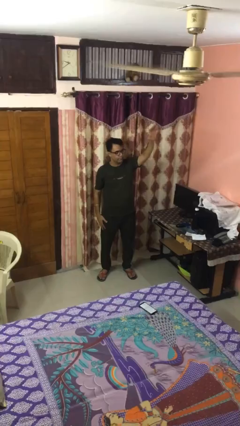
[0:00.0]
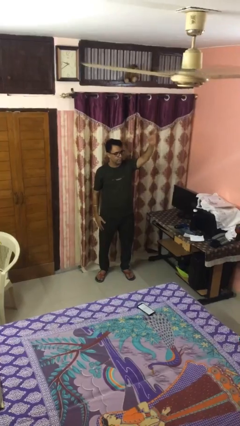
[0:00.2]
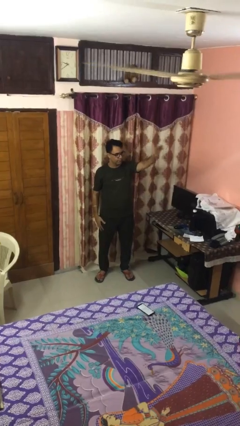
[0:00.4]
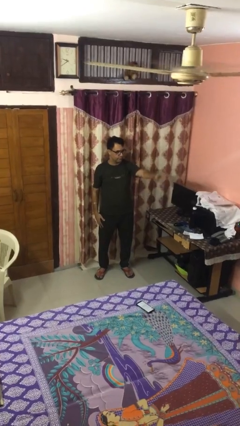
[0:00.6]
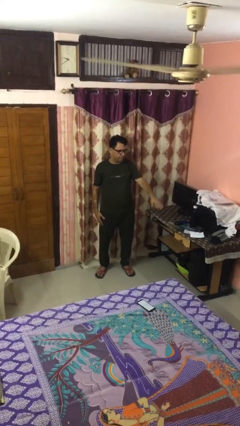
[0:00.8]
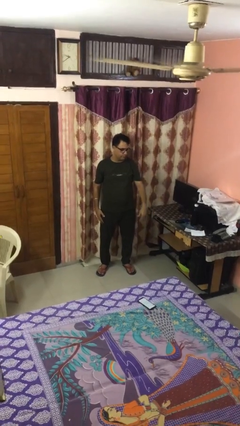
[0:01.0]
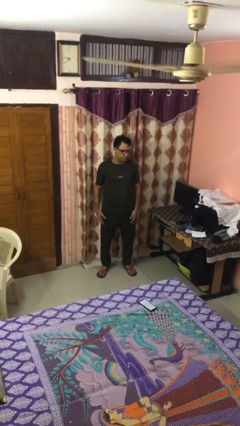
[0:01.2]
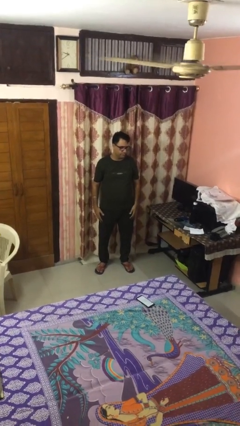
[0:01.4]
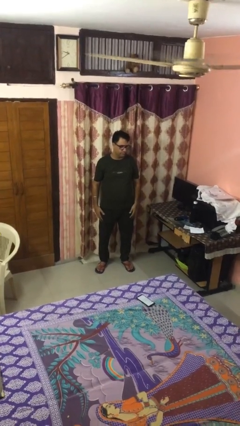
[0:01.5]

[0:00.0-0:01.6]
person gestures swipe down

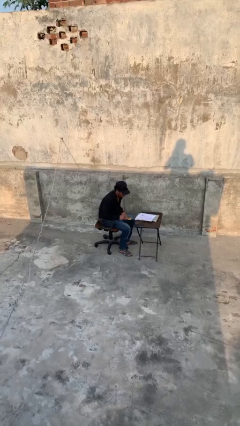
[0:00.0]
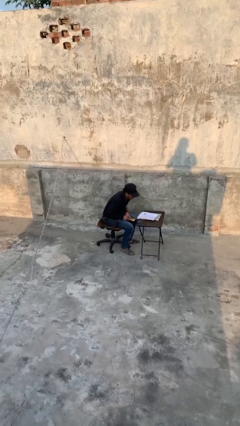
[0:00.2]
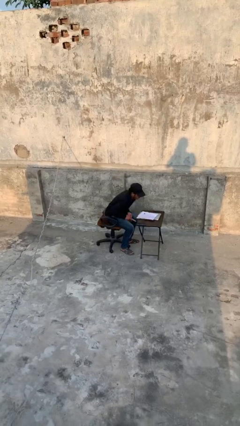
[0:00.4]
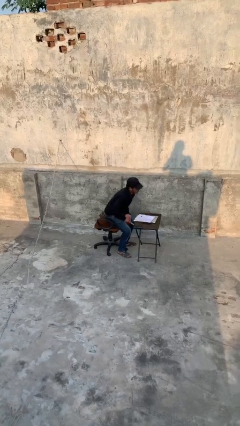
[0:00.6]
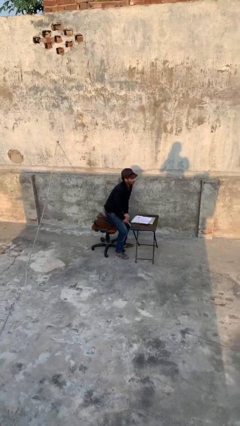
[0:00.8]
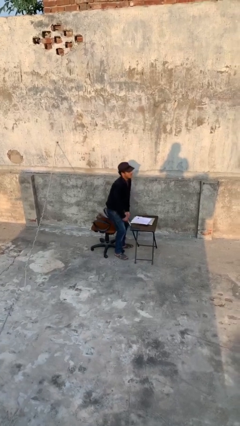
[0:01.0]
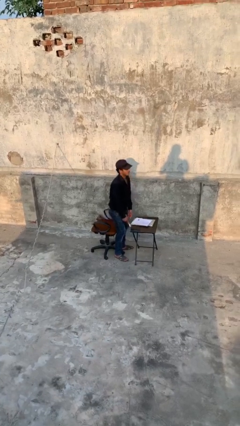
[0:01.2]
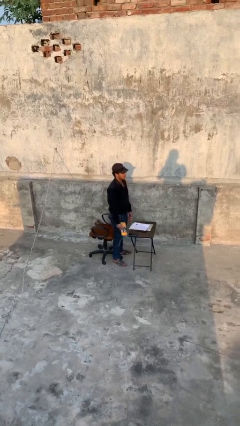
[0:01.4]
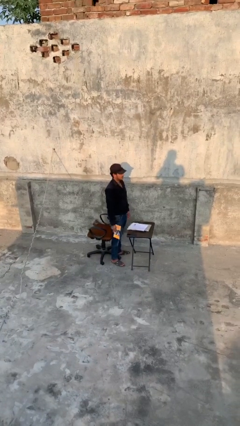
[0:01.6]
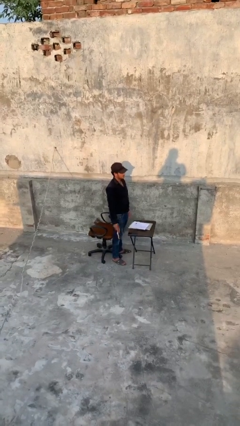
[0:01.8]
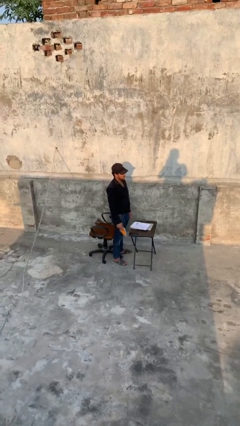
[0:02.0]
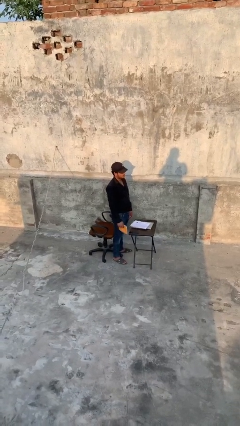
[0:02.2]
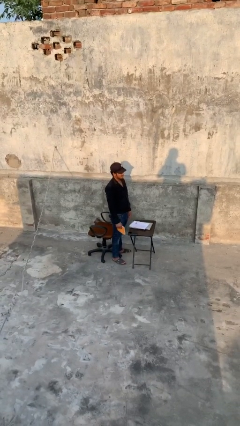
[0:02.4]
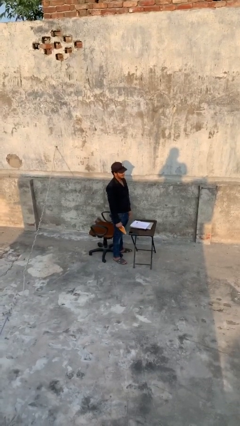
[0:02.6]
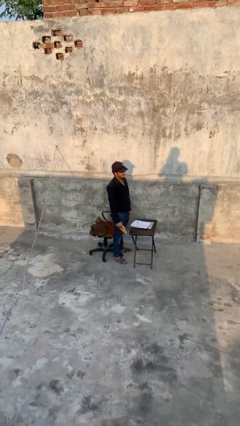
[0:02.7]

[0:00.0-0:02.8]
person stands up

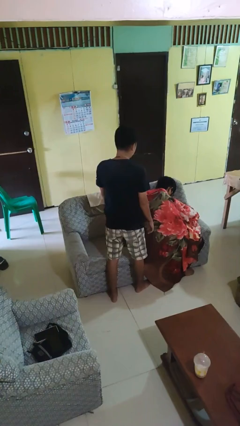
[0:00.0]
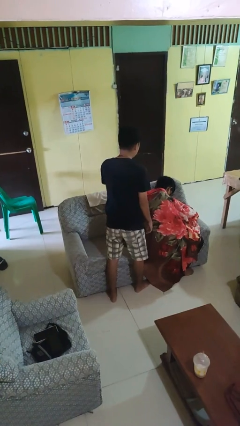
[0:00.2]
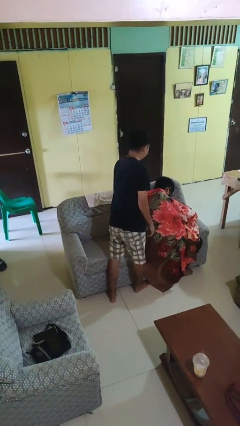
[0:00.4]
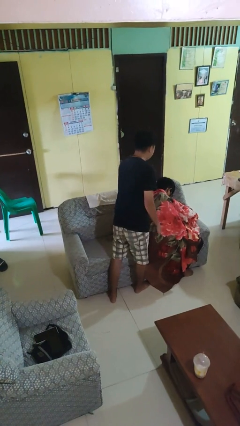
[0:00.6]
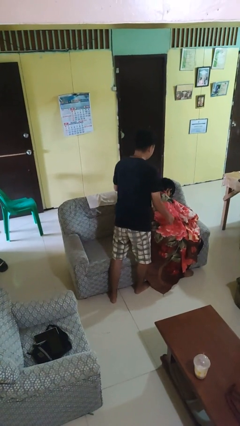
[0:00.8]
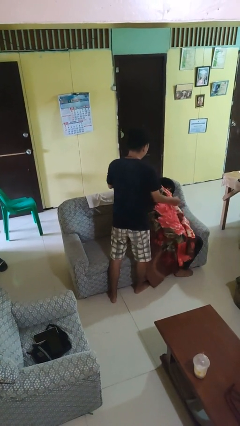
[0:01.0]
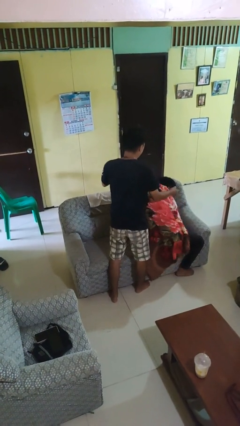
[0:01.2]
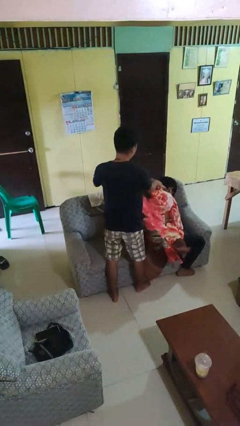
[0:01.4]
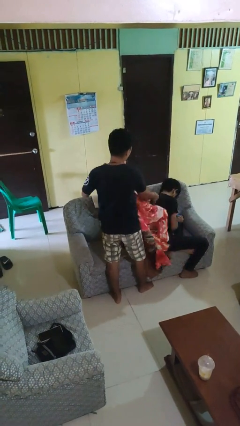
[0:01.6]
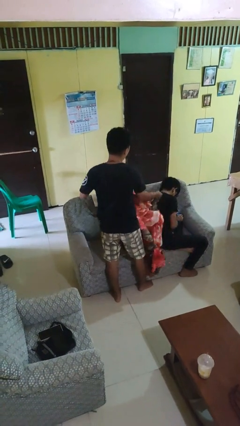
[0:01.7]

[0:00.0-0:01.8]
person uncovers friend with blanket

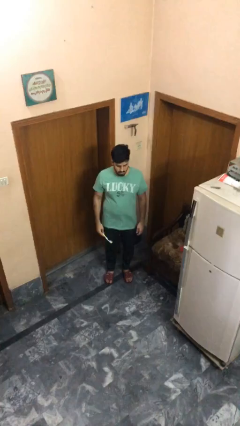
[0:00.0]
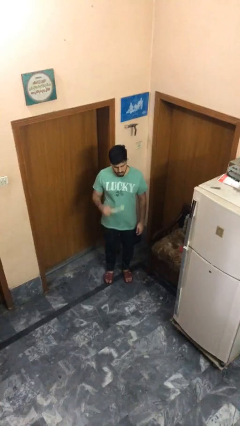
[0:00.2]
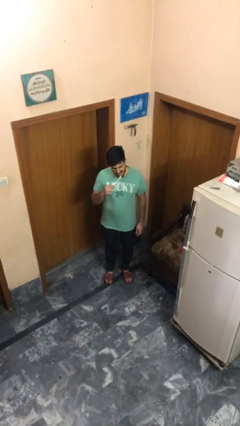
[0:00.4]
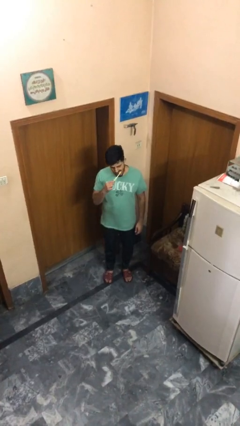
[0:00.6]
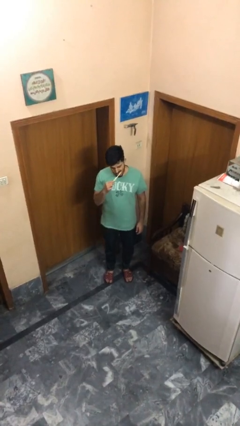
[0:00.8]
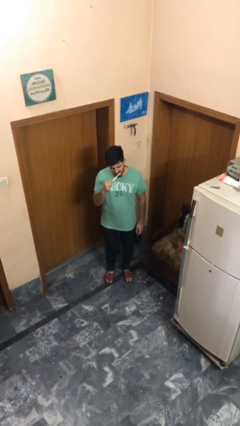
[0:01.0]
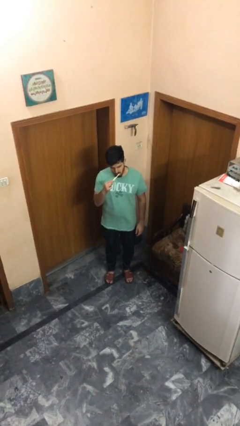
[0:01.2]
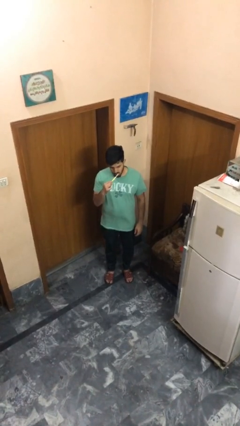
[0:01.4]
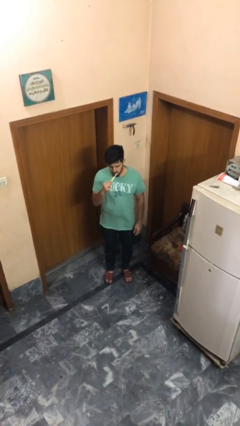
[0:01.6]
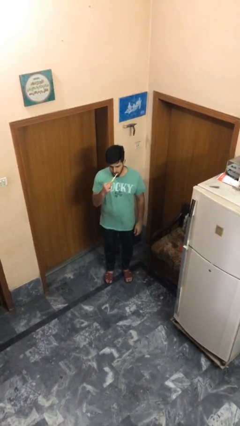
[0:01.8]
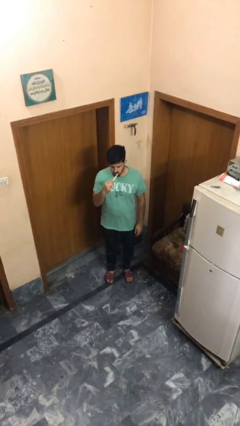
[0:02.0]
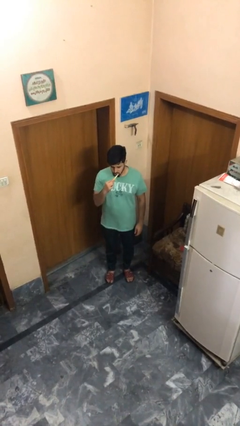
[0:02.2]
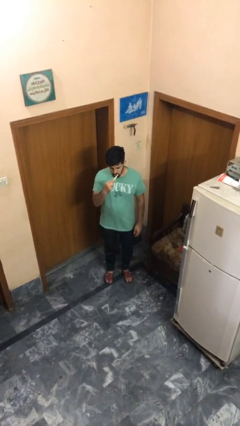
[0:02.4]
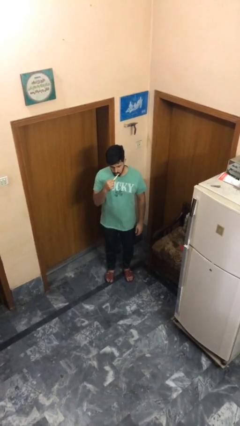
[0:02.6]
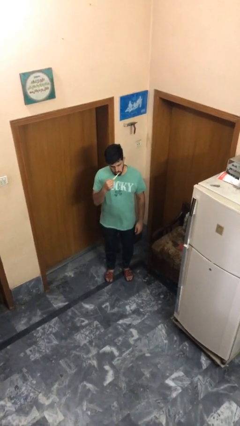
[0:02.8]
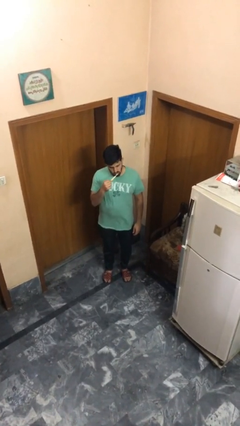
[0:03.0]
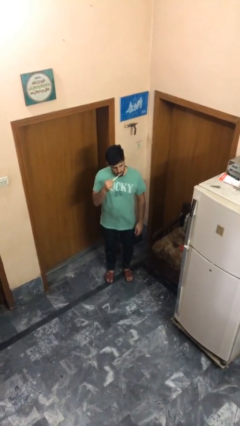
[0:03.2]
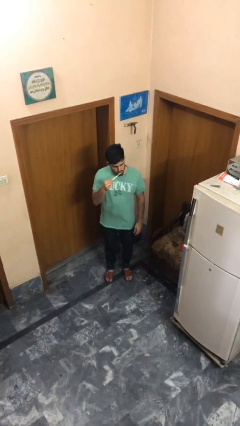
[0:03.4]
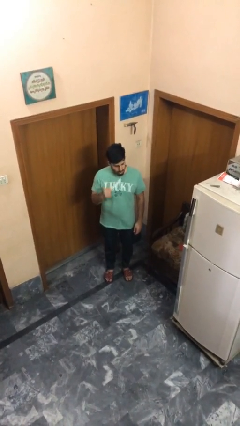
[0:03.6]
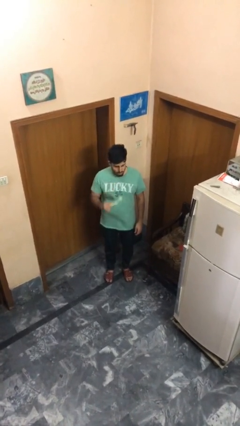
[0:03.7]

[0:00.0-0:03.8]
person brushes teeth

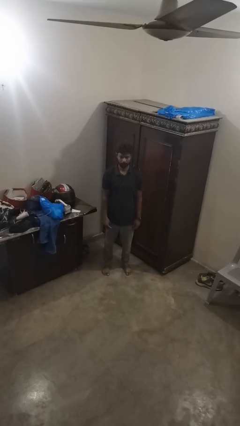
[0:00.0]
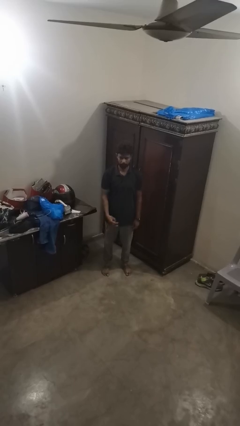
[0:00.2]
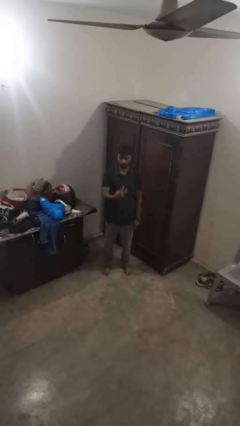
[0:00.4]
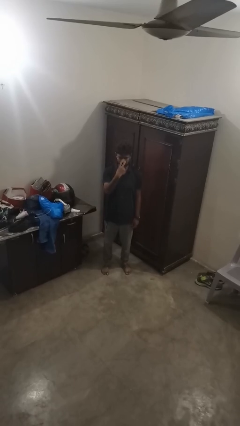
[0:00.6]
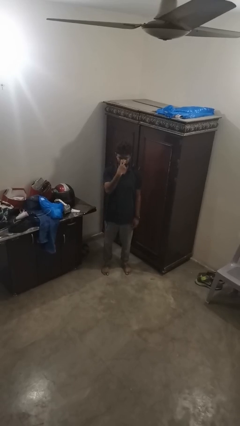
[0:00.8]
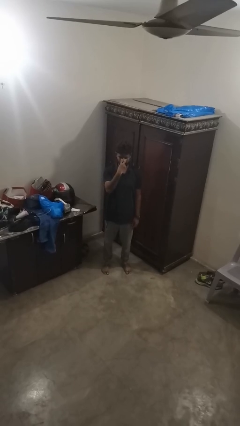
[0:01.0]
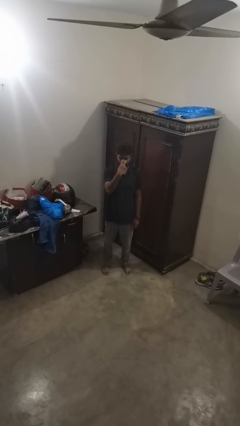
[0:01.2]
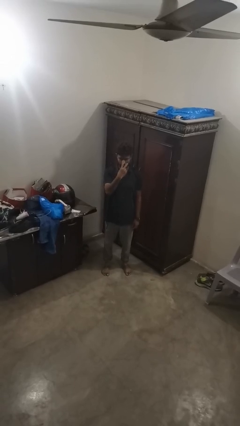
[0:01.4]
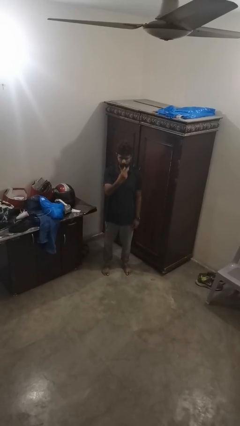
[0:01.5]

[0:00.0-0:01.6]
person gestures watch closely

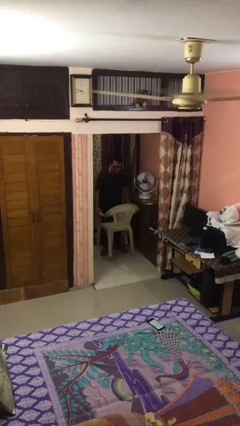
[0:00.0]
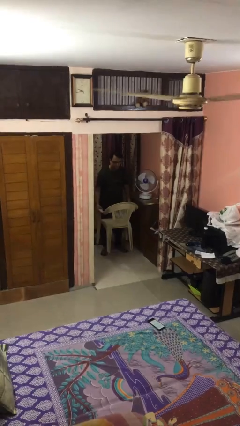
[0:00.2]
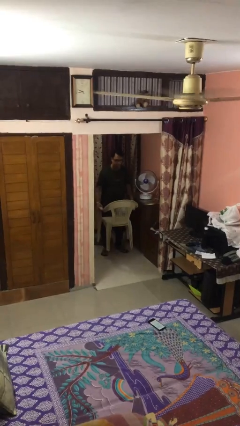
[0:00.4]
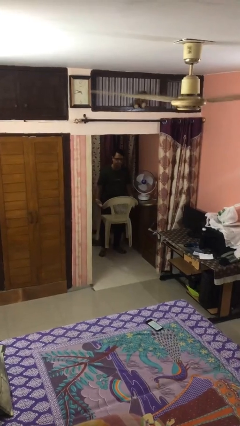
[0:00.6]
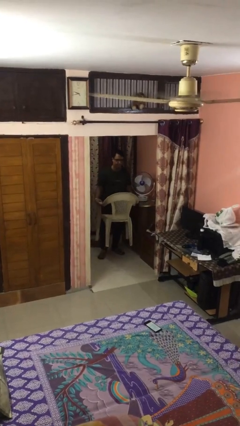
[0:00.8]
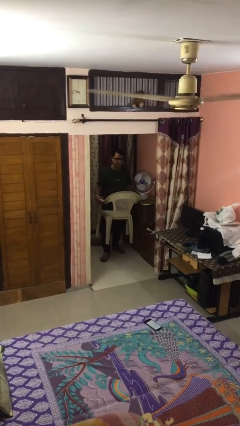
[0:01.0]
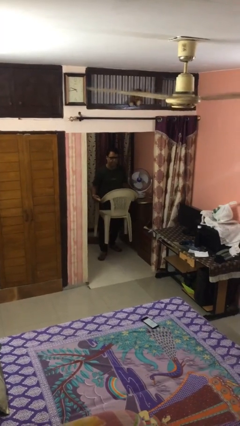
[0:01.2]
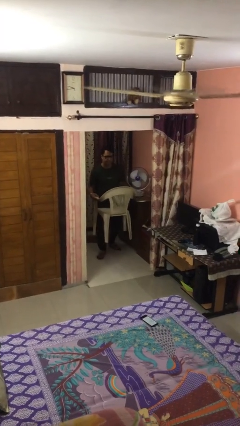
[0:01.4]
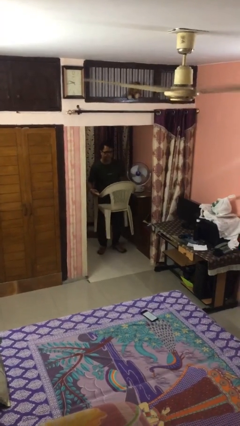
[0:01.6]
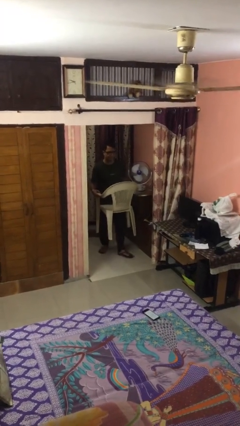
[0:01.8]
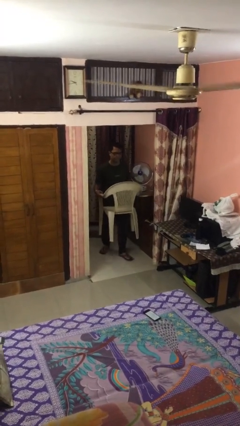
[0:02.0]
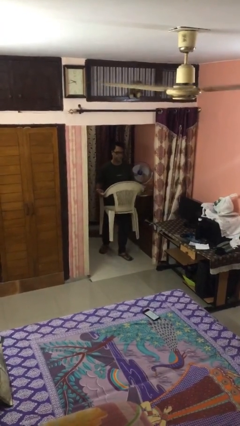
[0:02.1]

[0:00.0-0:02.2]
person carries furniture

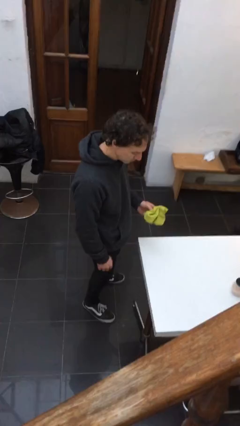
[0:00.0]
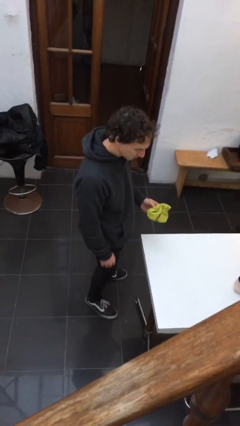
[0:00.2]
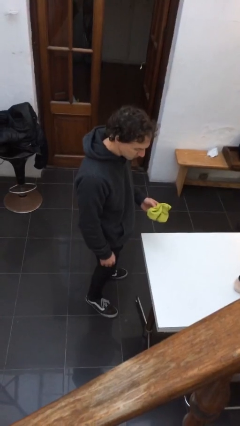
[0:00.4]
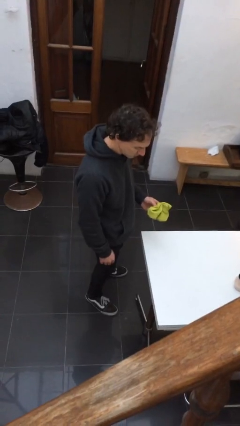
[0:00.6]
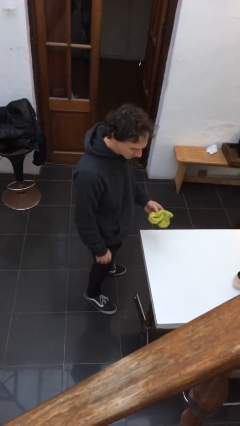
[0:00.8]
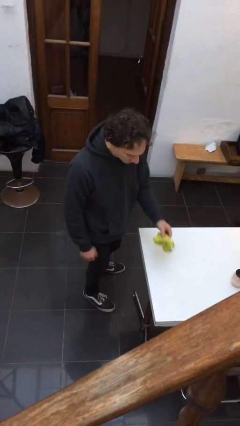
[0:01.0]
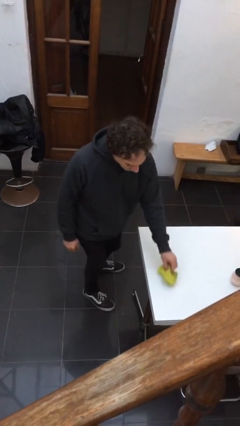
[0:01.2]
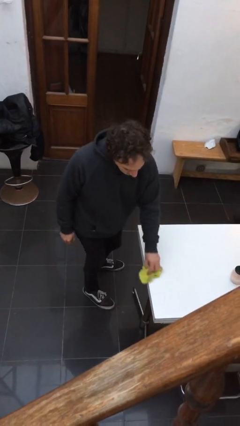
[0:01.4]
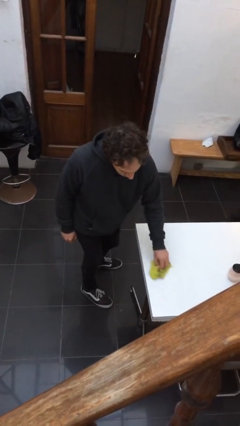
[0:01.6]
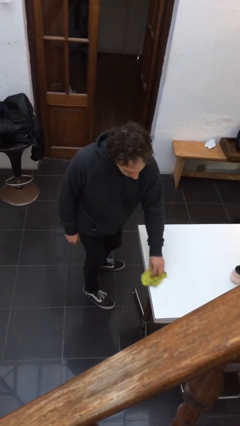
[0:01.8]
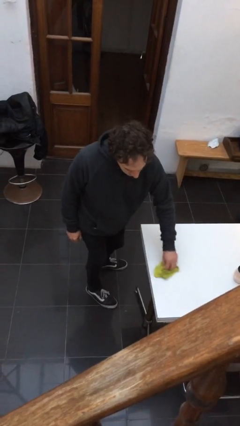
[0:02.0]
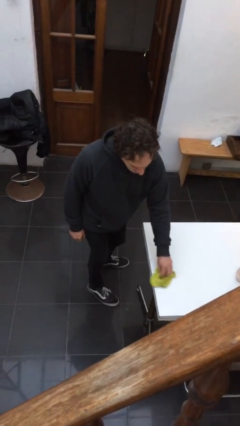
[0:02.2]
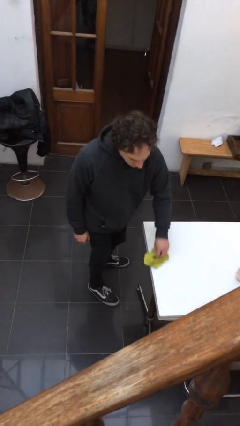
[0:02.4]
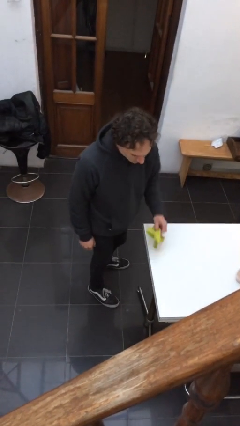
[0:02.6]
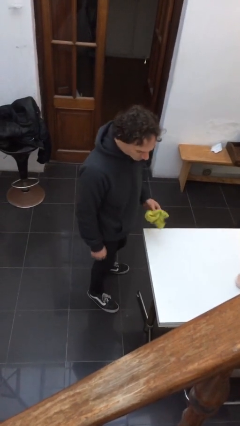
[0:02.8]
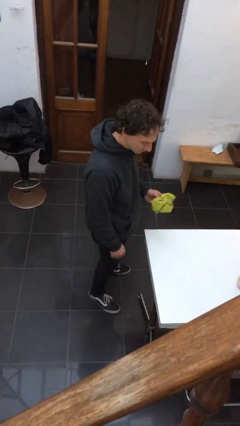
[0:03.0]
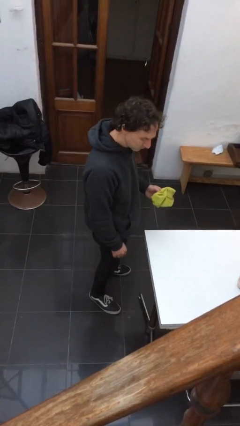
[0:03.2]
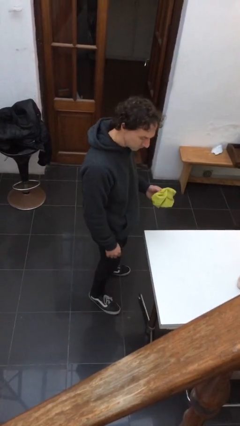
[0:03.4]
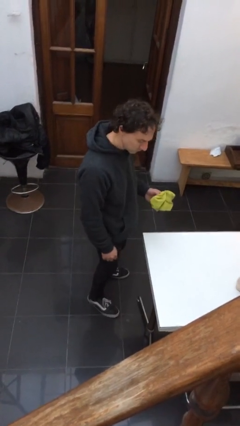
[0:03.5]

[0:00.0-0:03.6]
person cleans table with rag
